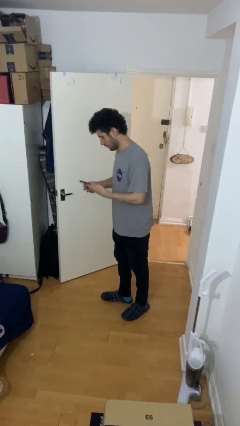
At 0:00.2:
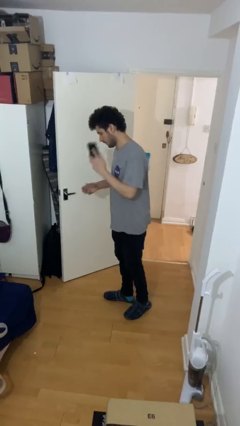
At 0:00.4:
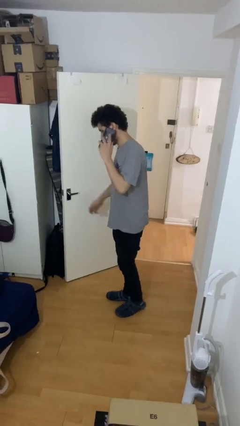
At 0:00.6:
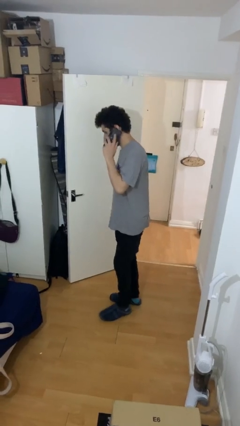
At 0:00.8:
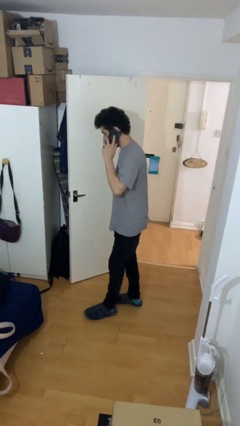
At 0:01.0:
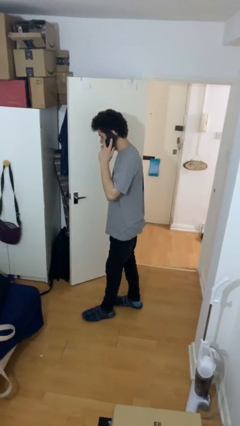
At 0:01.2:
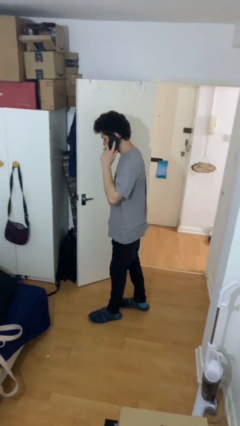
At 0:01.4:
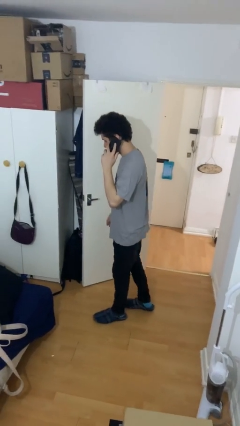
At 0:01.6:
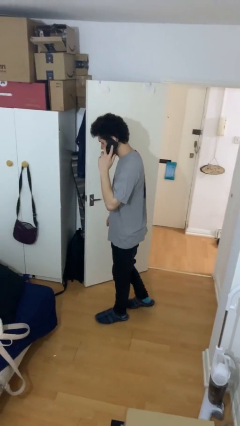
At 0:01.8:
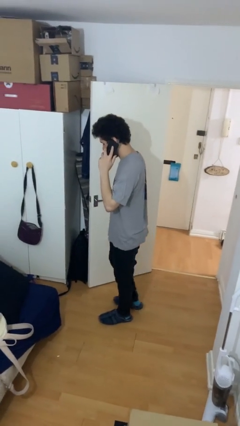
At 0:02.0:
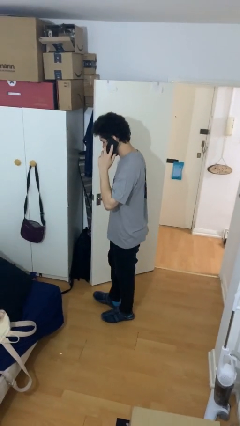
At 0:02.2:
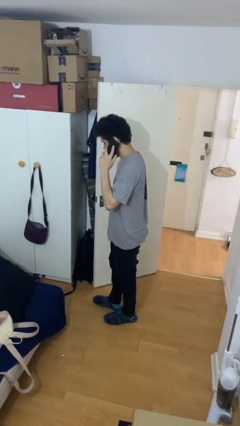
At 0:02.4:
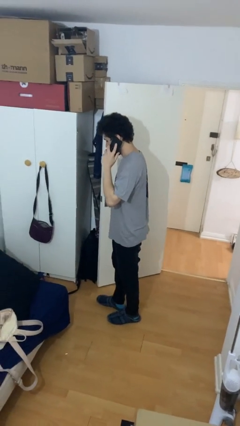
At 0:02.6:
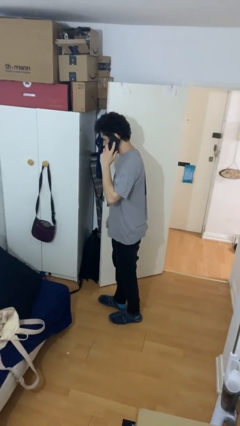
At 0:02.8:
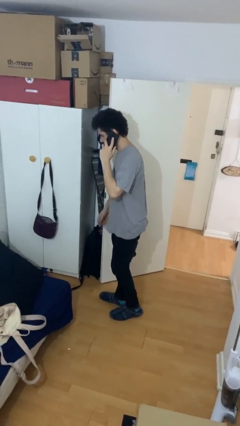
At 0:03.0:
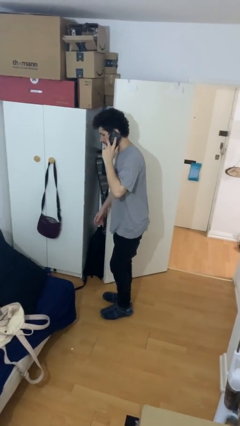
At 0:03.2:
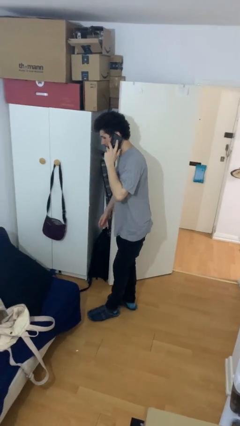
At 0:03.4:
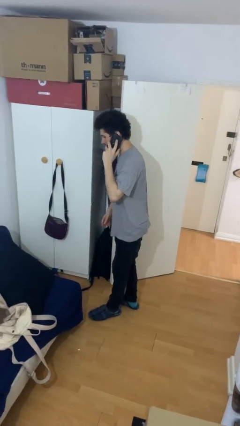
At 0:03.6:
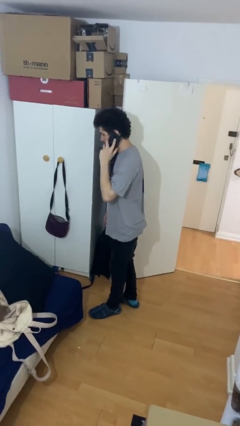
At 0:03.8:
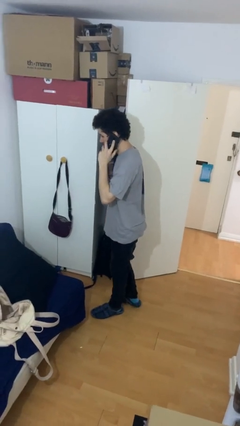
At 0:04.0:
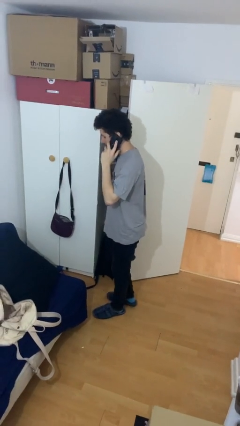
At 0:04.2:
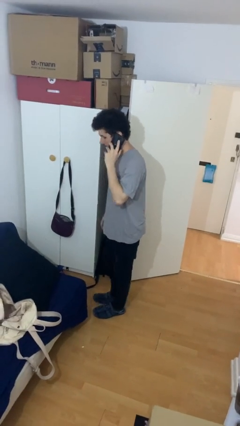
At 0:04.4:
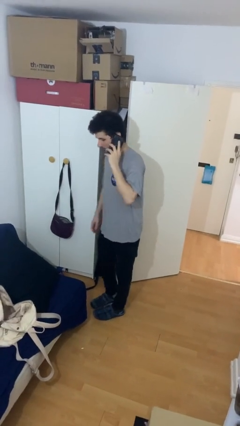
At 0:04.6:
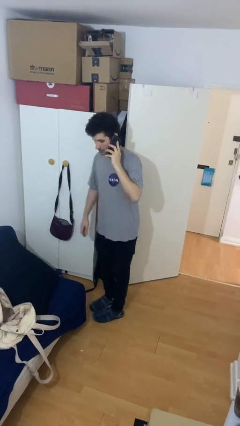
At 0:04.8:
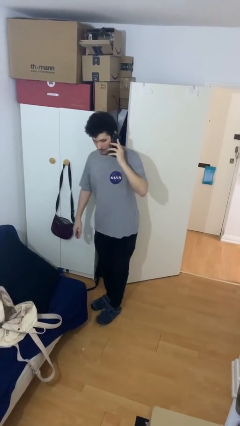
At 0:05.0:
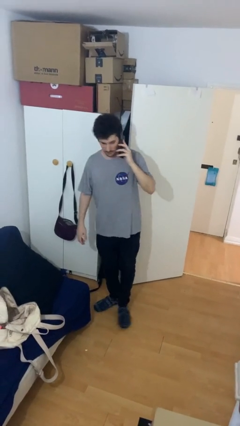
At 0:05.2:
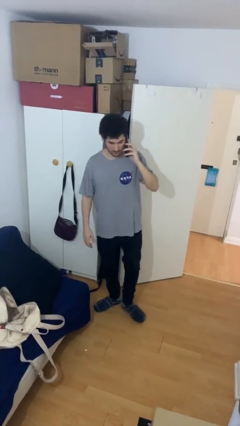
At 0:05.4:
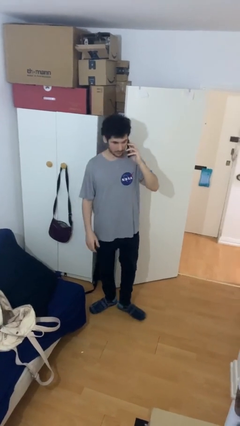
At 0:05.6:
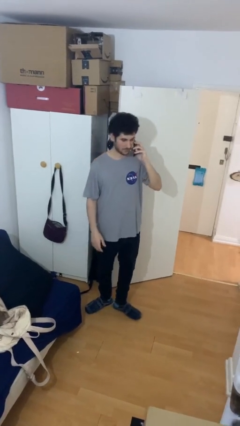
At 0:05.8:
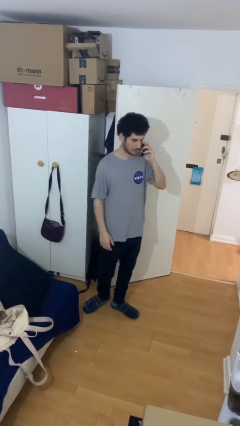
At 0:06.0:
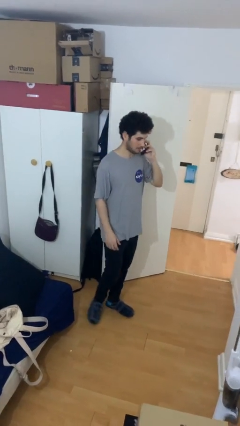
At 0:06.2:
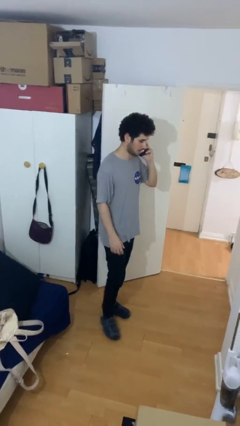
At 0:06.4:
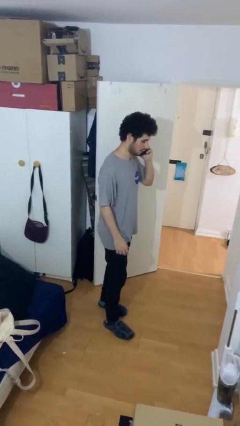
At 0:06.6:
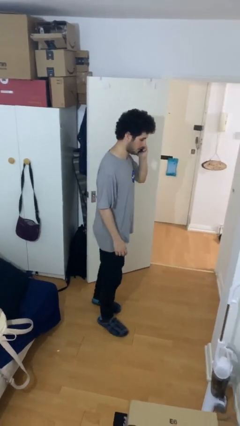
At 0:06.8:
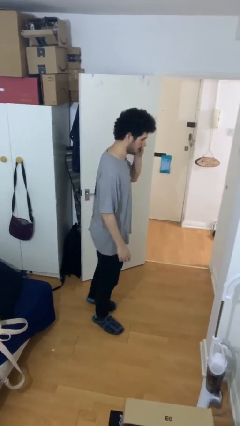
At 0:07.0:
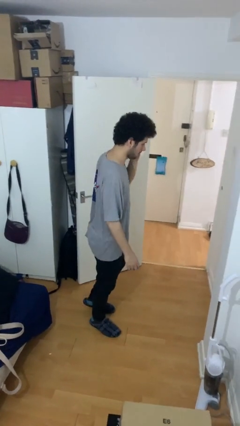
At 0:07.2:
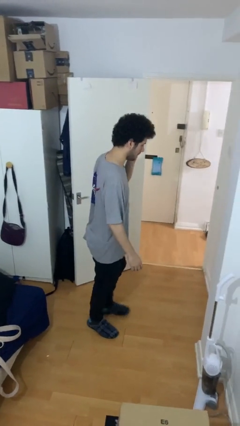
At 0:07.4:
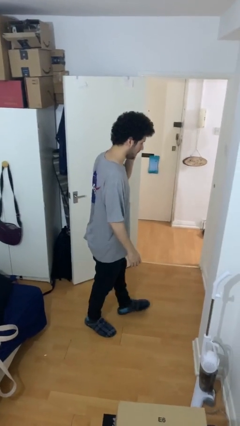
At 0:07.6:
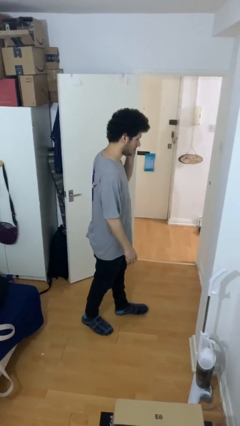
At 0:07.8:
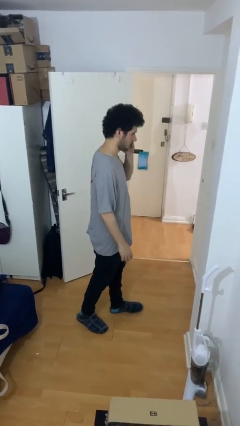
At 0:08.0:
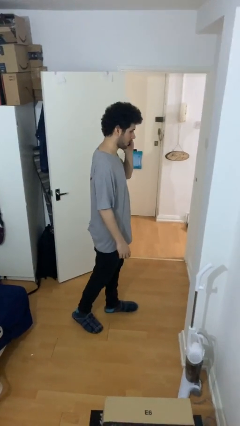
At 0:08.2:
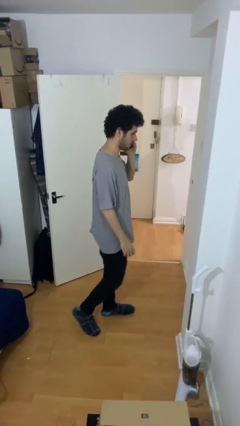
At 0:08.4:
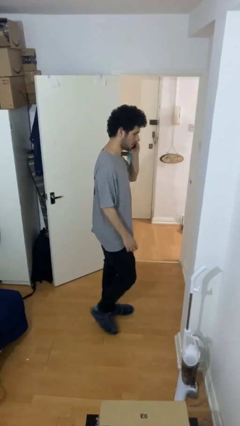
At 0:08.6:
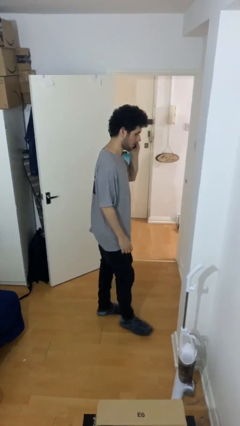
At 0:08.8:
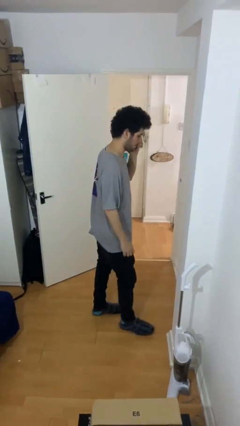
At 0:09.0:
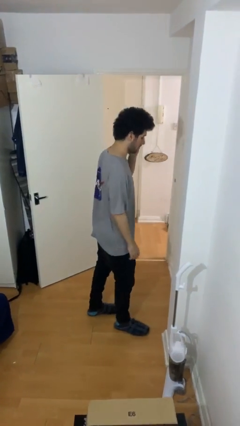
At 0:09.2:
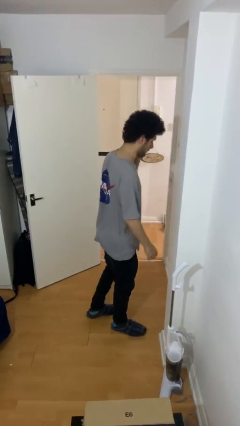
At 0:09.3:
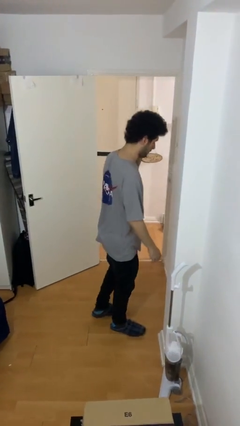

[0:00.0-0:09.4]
person talks on phone

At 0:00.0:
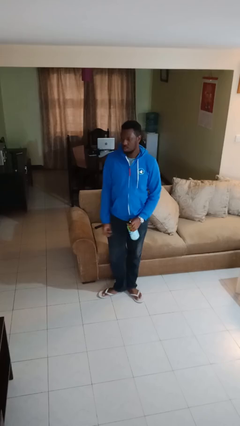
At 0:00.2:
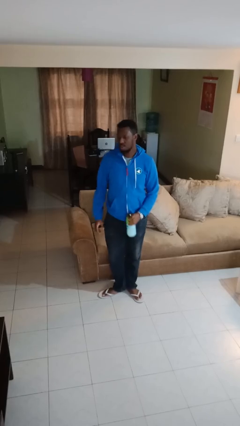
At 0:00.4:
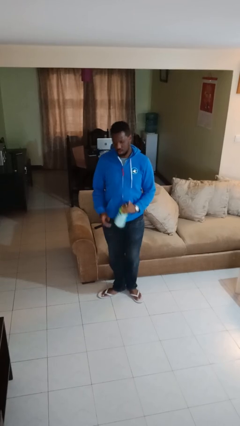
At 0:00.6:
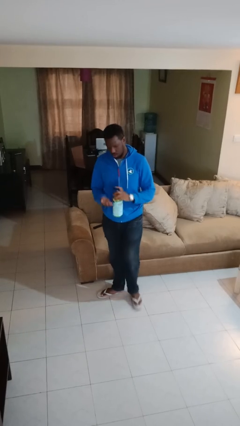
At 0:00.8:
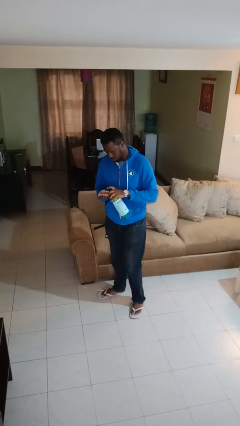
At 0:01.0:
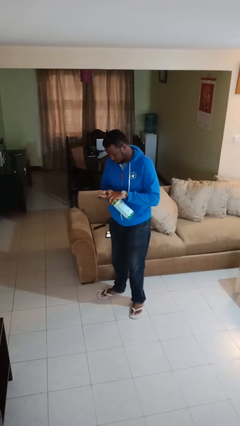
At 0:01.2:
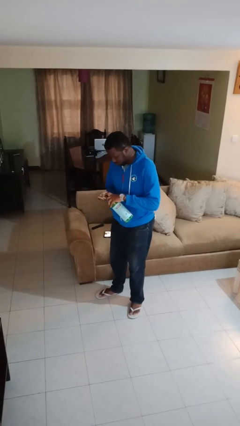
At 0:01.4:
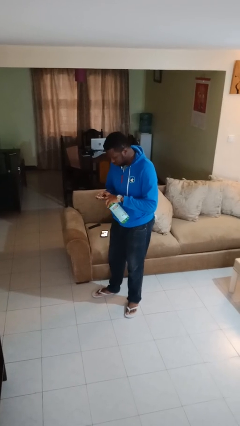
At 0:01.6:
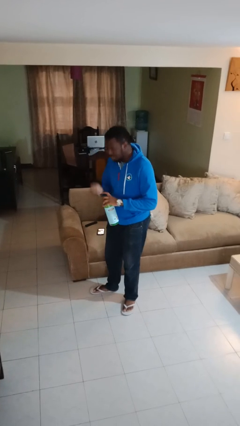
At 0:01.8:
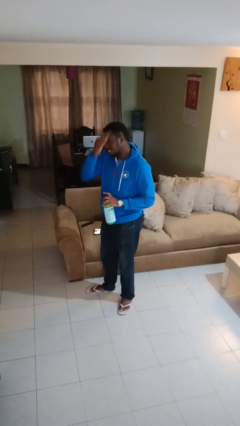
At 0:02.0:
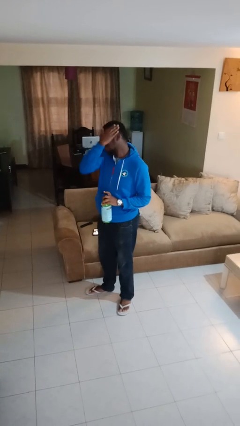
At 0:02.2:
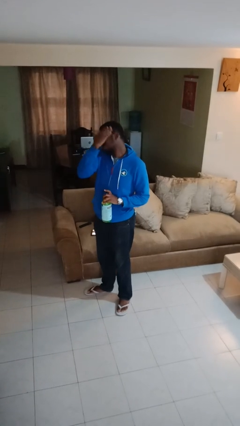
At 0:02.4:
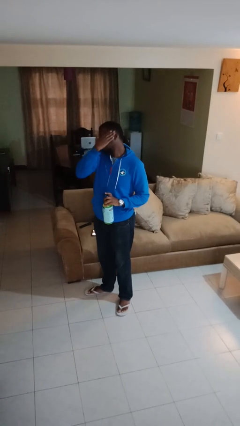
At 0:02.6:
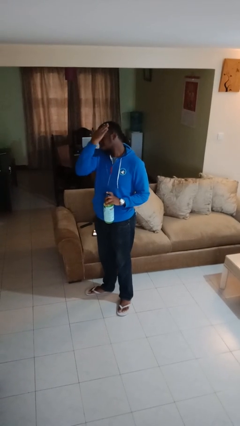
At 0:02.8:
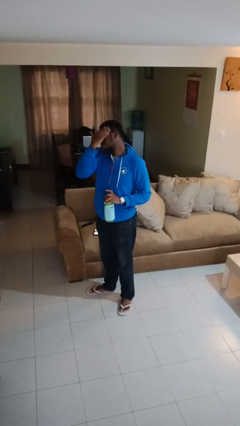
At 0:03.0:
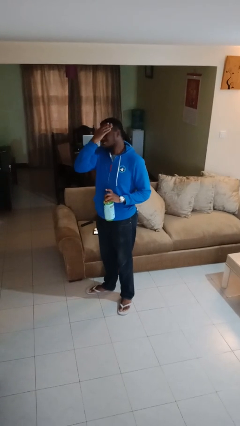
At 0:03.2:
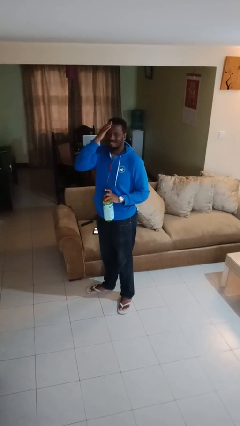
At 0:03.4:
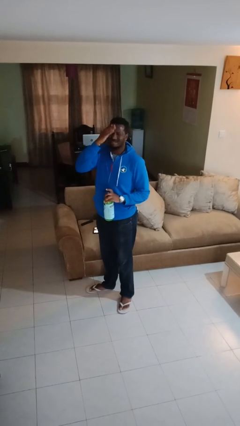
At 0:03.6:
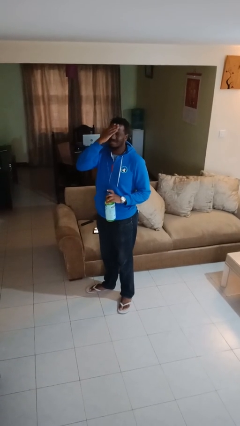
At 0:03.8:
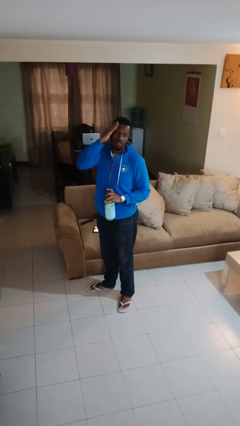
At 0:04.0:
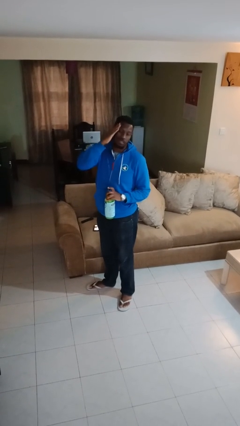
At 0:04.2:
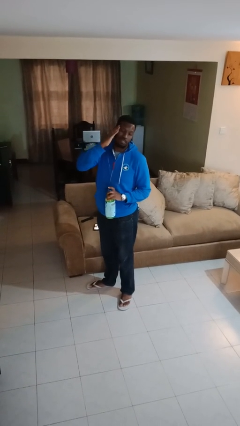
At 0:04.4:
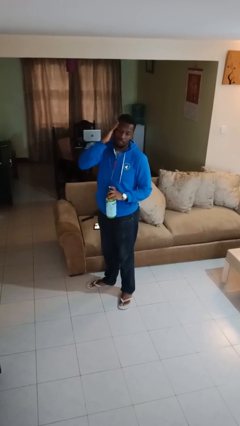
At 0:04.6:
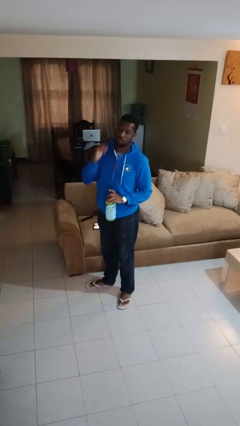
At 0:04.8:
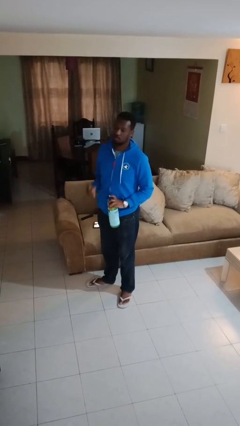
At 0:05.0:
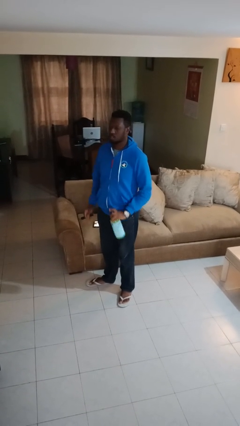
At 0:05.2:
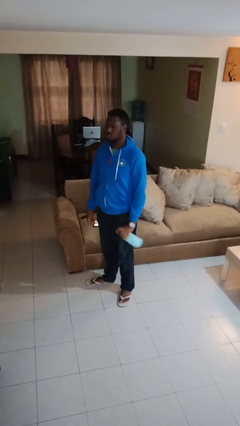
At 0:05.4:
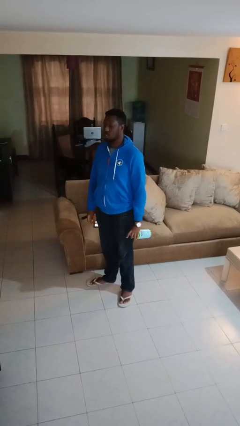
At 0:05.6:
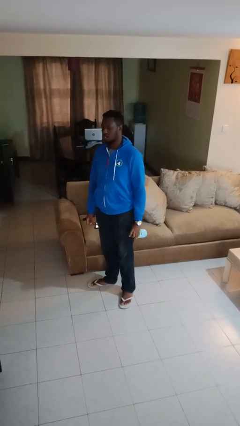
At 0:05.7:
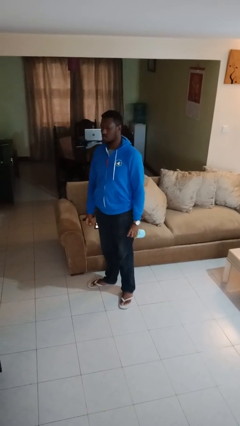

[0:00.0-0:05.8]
person applies facial moisturizer

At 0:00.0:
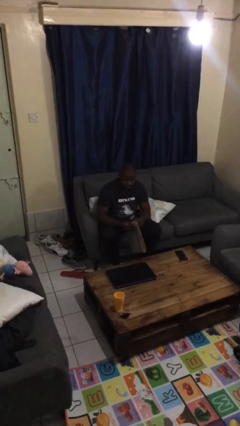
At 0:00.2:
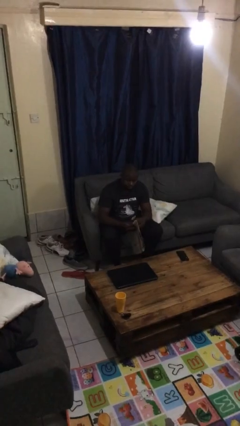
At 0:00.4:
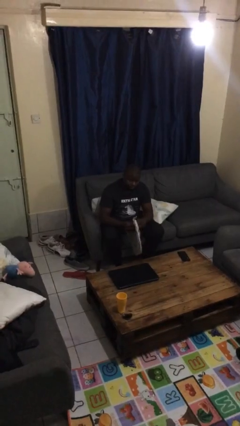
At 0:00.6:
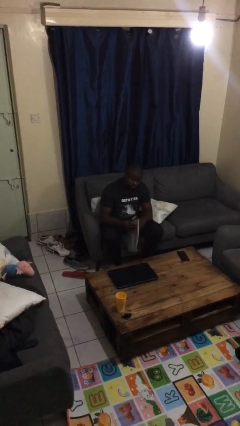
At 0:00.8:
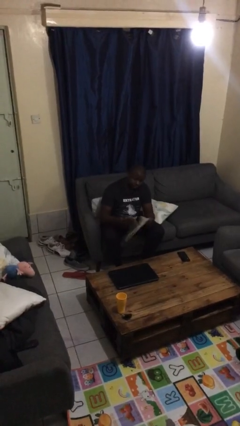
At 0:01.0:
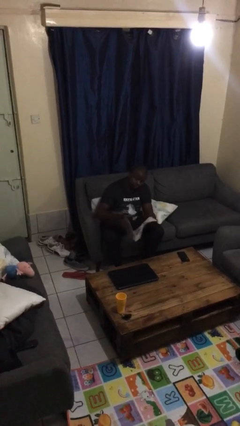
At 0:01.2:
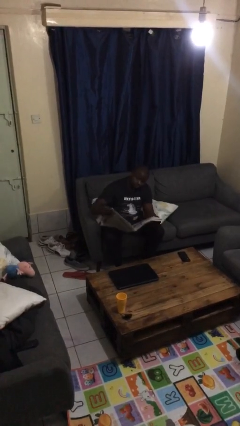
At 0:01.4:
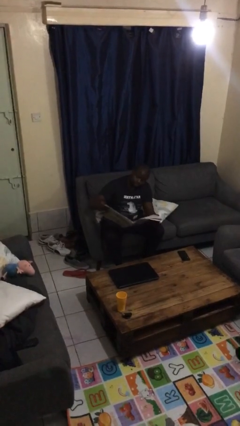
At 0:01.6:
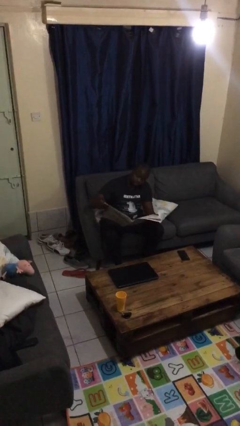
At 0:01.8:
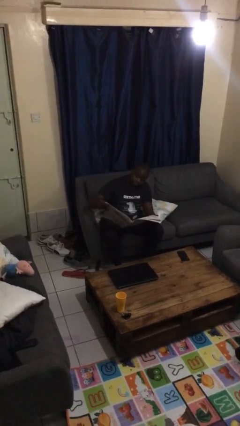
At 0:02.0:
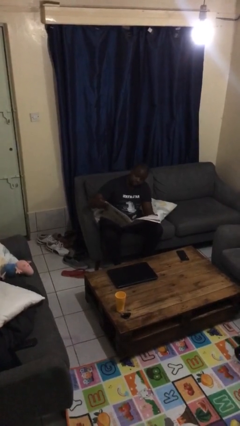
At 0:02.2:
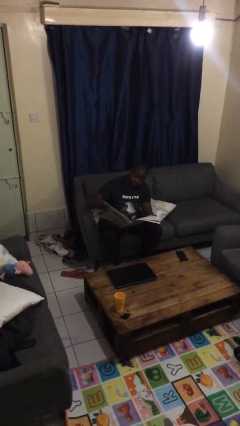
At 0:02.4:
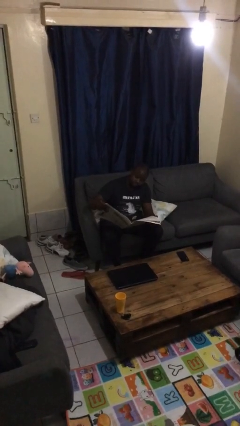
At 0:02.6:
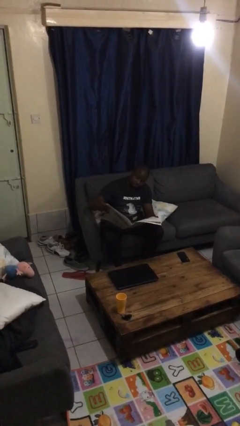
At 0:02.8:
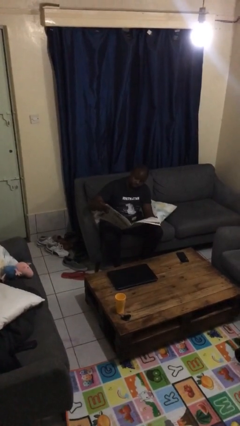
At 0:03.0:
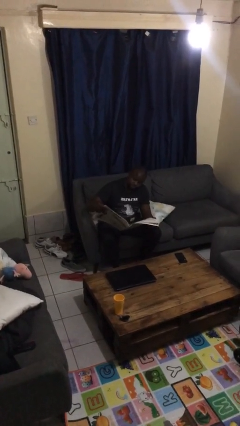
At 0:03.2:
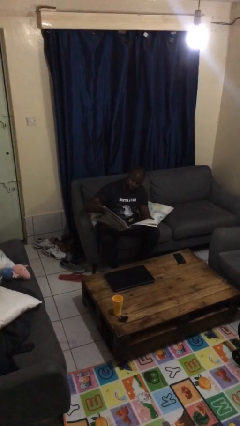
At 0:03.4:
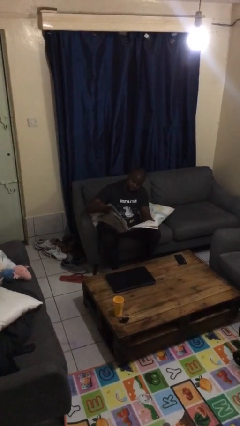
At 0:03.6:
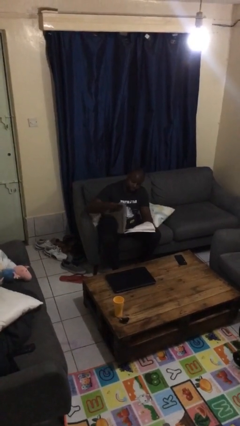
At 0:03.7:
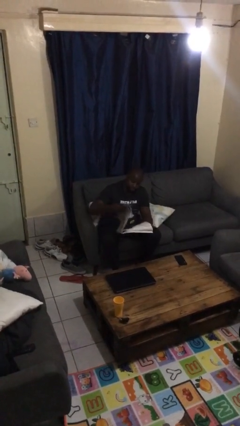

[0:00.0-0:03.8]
person reads newspaper
